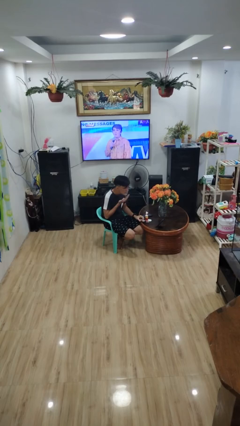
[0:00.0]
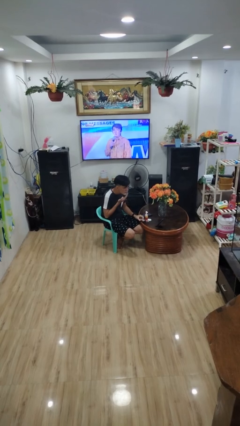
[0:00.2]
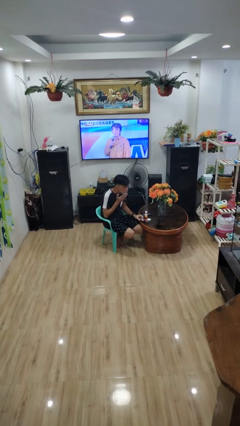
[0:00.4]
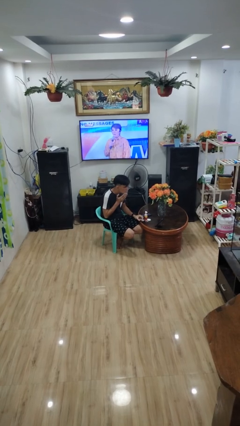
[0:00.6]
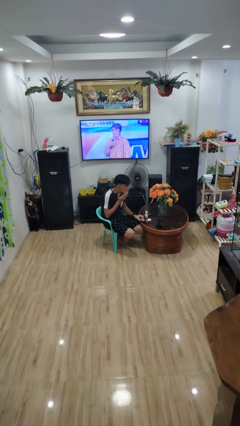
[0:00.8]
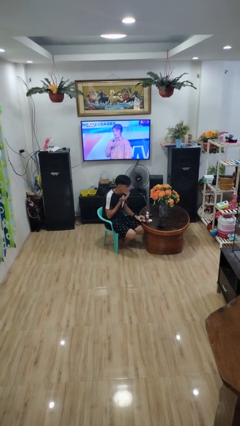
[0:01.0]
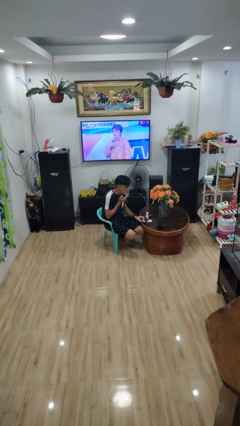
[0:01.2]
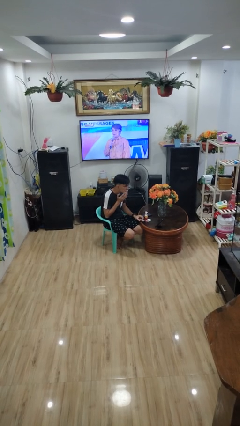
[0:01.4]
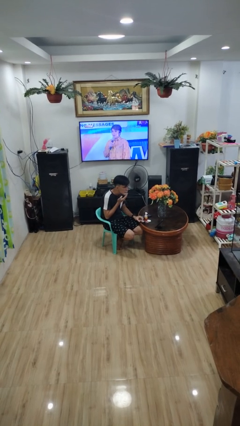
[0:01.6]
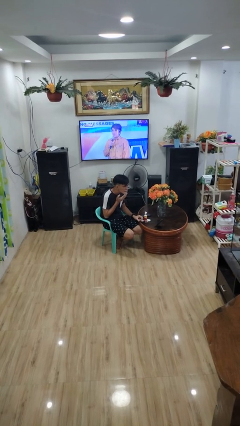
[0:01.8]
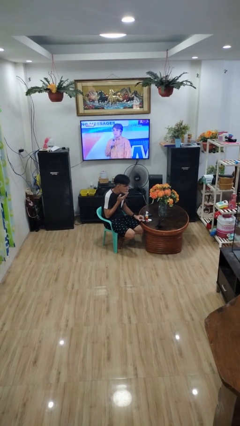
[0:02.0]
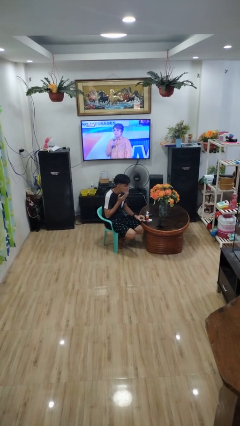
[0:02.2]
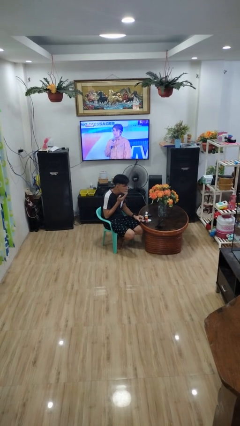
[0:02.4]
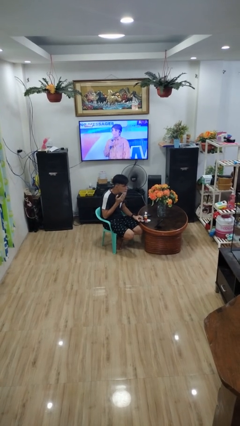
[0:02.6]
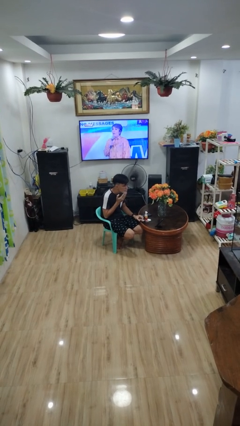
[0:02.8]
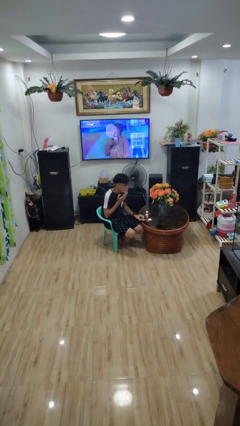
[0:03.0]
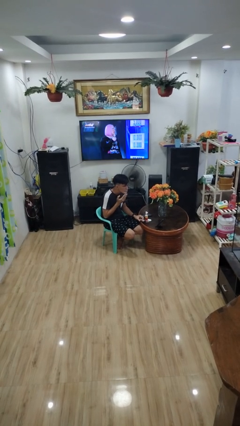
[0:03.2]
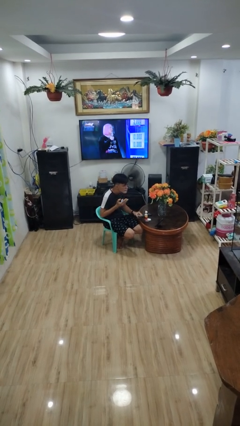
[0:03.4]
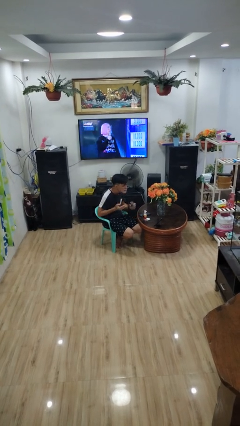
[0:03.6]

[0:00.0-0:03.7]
person applies shaving cream

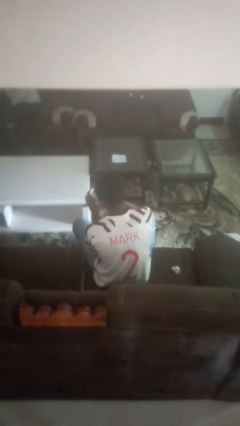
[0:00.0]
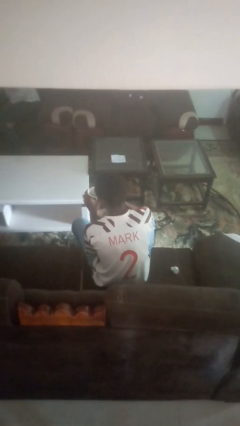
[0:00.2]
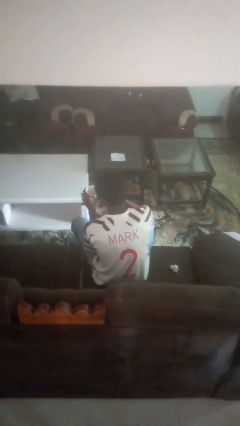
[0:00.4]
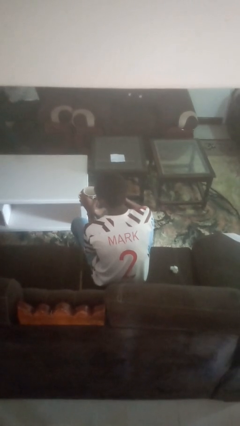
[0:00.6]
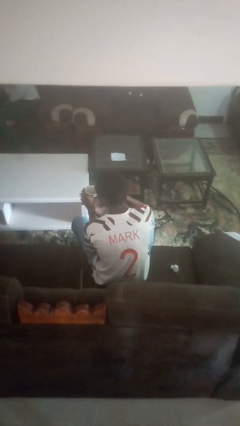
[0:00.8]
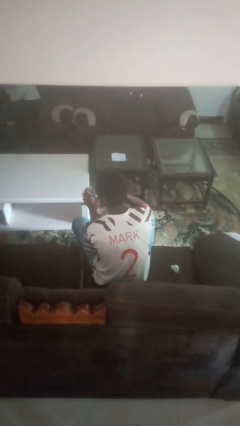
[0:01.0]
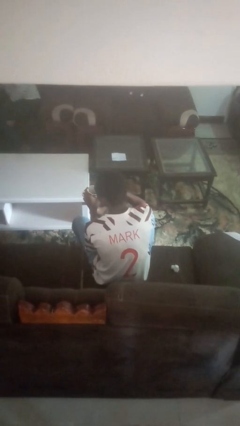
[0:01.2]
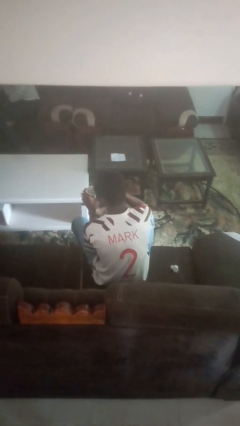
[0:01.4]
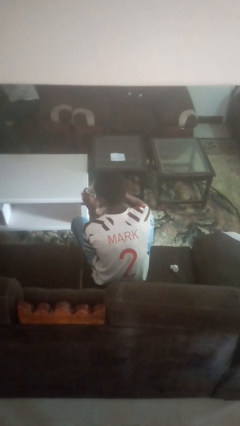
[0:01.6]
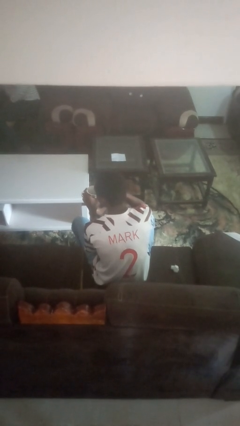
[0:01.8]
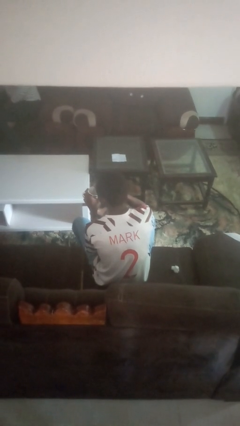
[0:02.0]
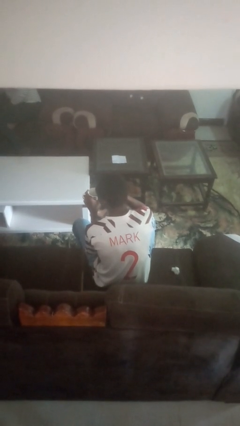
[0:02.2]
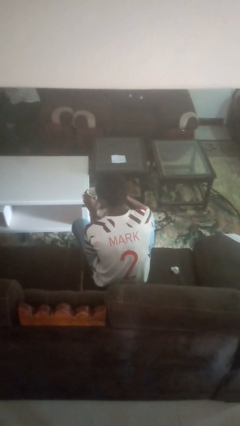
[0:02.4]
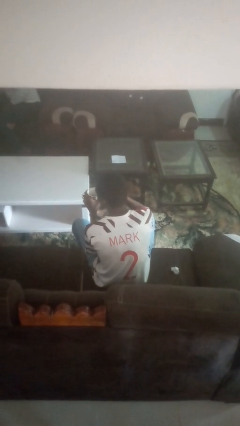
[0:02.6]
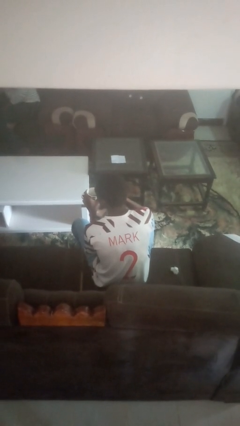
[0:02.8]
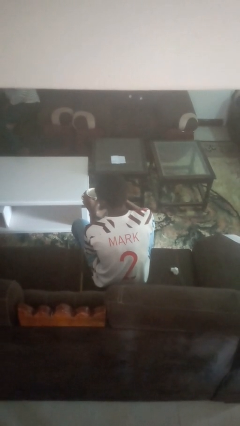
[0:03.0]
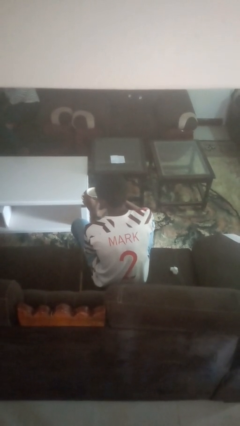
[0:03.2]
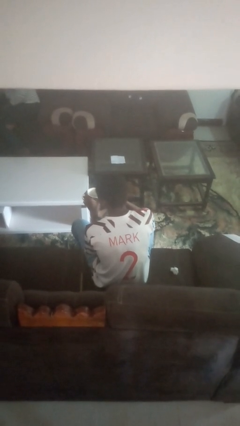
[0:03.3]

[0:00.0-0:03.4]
person stirs mug

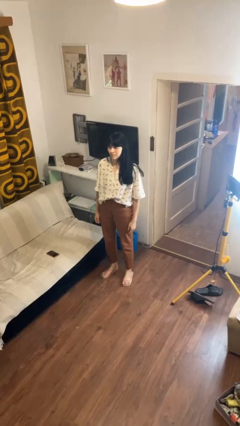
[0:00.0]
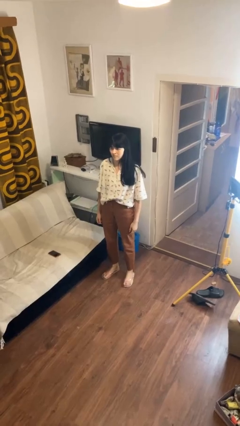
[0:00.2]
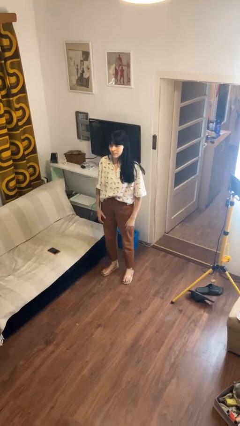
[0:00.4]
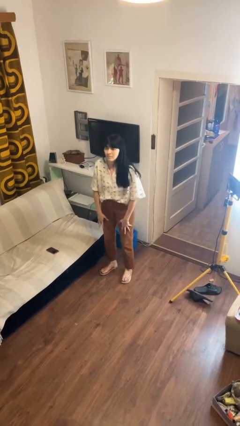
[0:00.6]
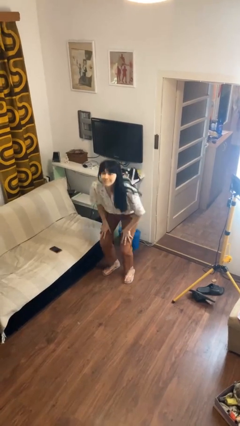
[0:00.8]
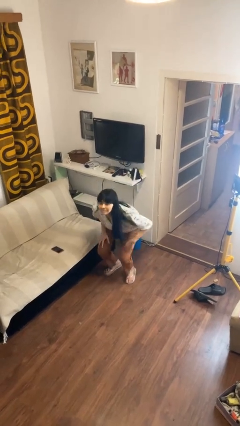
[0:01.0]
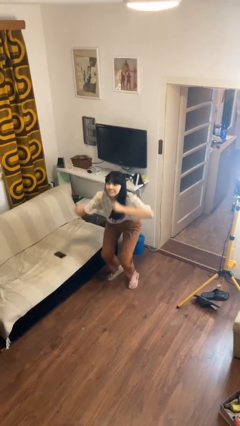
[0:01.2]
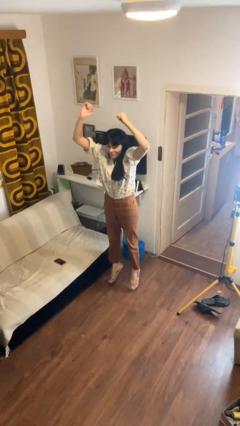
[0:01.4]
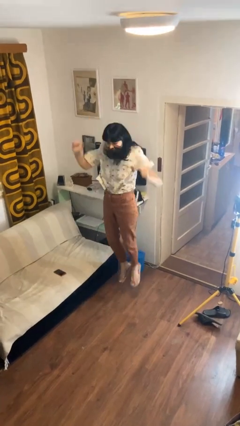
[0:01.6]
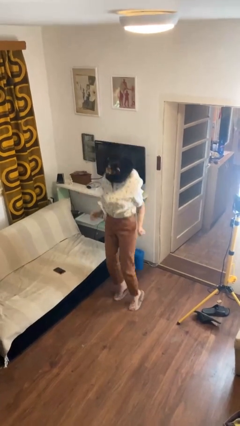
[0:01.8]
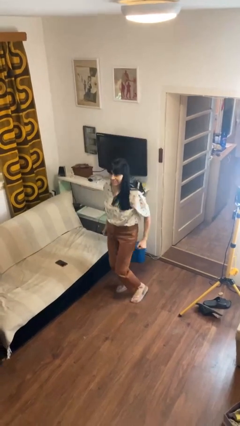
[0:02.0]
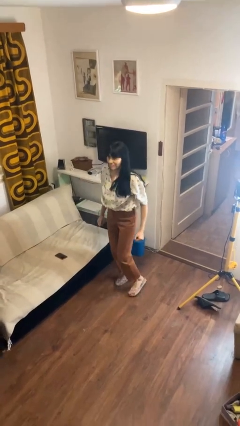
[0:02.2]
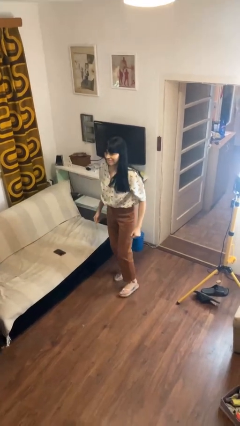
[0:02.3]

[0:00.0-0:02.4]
person jumps

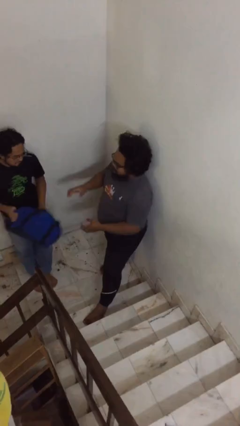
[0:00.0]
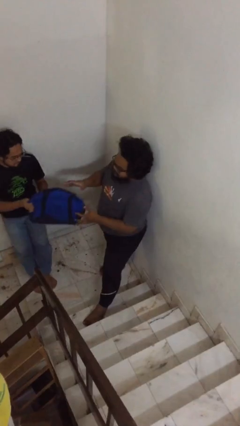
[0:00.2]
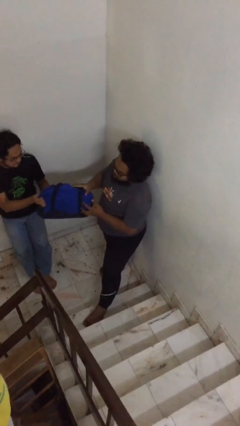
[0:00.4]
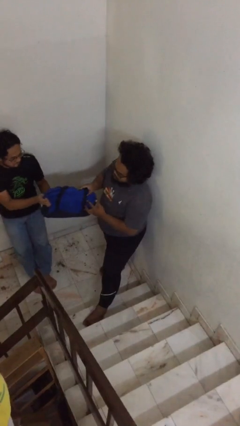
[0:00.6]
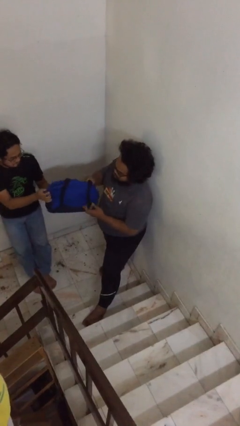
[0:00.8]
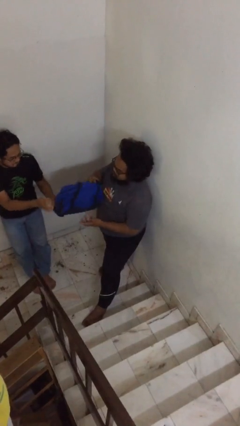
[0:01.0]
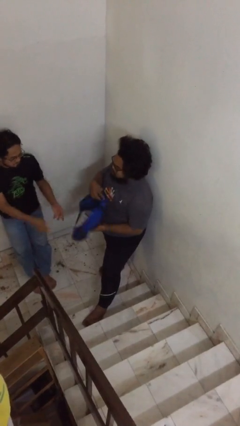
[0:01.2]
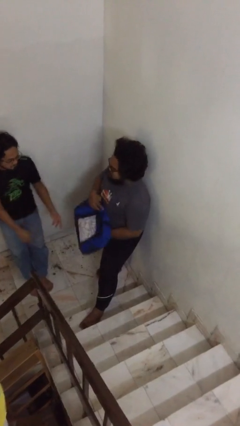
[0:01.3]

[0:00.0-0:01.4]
person transfers object to person

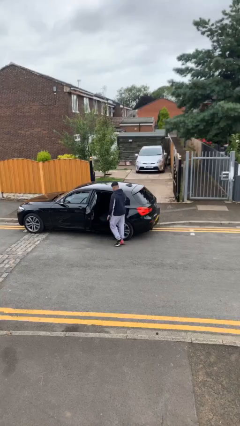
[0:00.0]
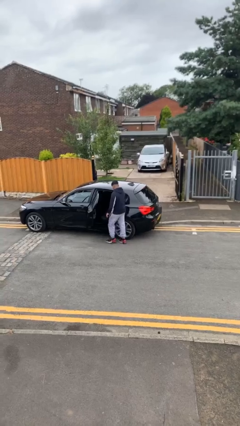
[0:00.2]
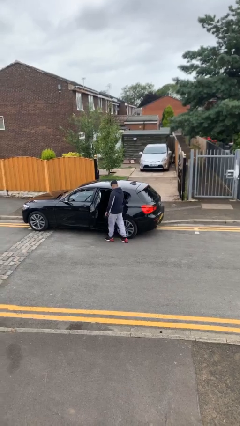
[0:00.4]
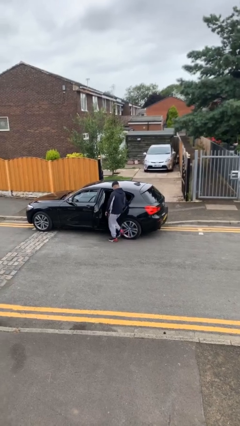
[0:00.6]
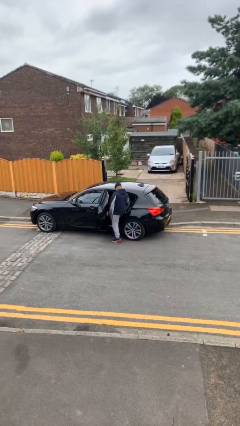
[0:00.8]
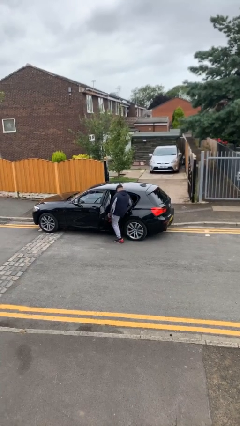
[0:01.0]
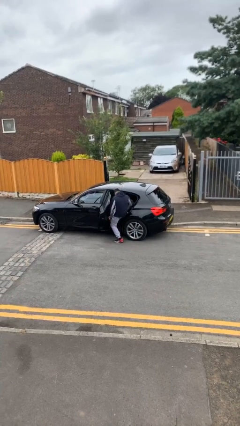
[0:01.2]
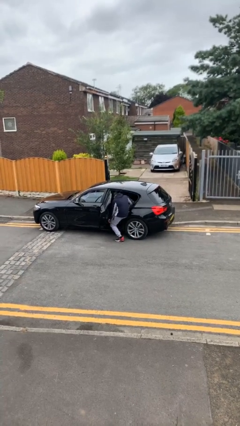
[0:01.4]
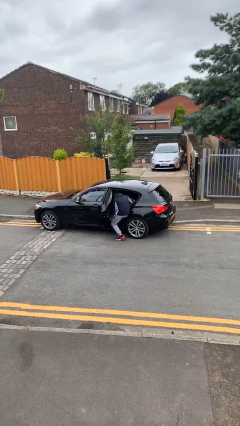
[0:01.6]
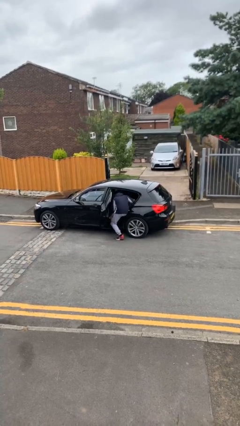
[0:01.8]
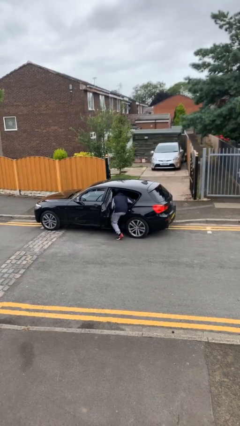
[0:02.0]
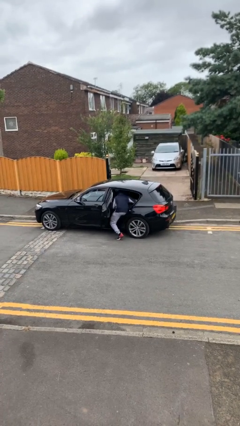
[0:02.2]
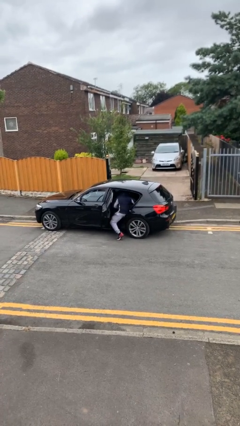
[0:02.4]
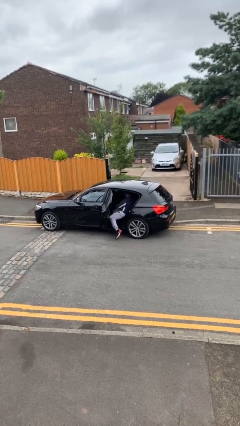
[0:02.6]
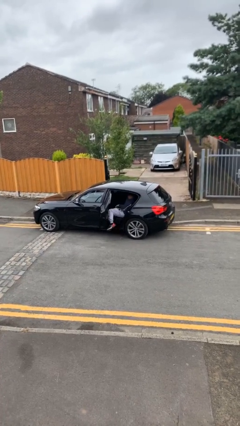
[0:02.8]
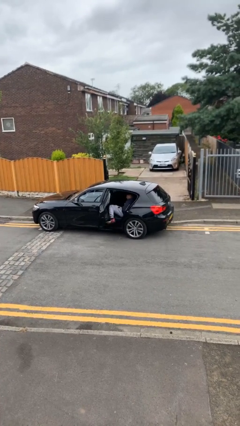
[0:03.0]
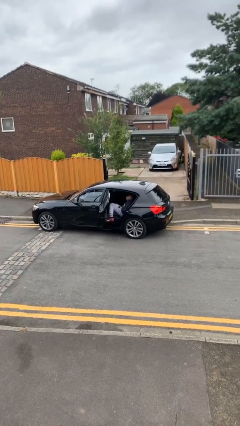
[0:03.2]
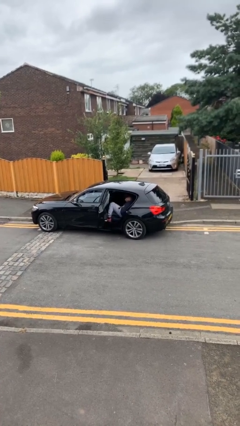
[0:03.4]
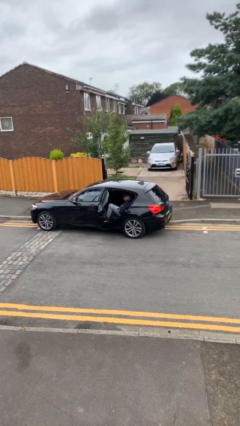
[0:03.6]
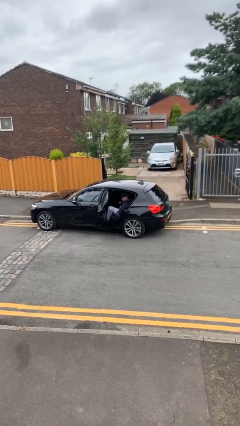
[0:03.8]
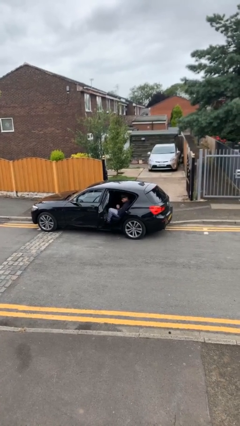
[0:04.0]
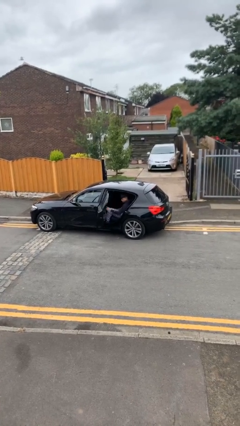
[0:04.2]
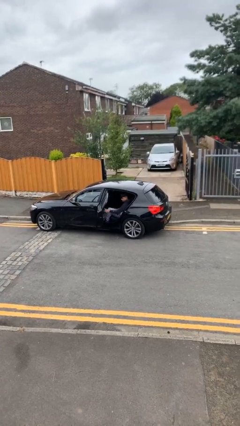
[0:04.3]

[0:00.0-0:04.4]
person enters car

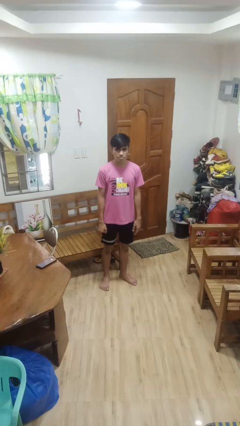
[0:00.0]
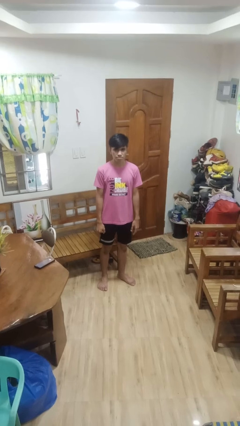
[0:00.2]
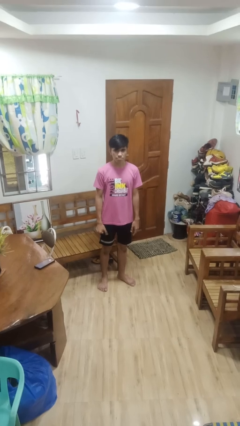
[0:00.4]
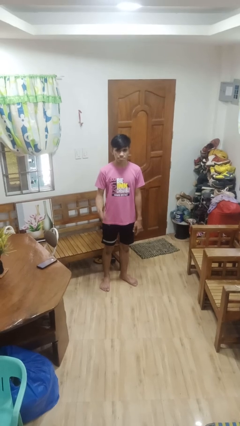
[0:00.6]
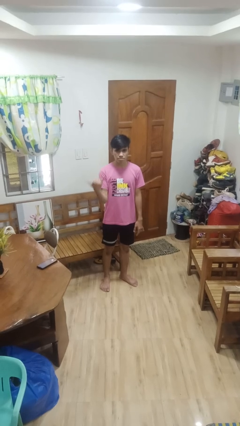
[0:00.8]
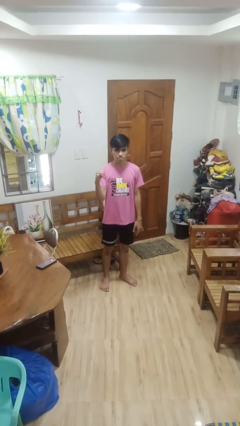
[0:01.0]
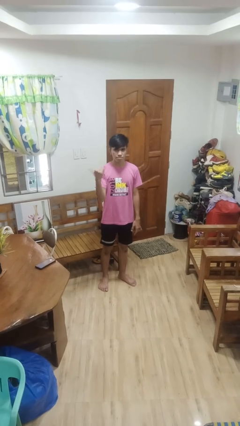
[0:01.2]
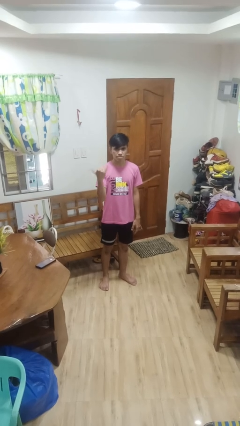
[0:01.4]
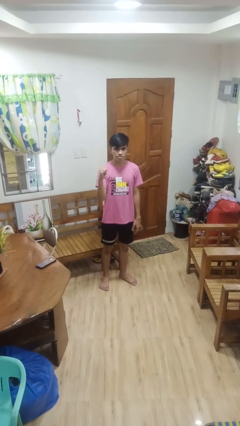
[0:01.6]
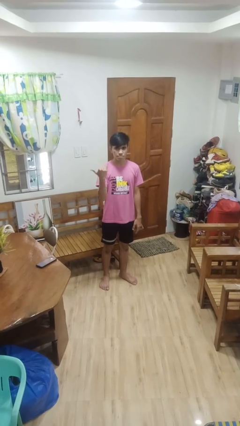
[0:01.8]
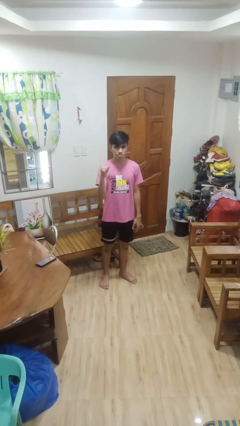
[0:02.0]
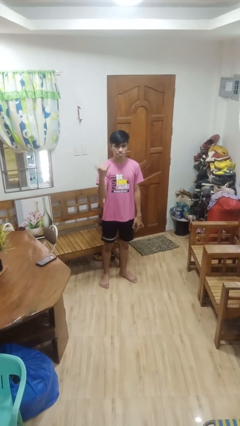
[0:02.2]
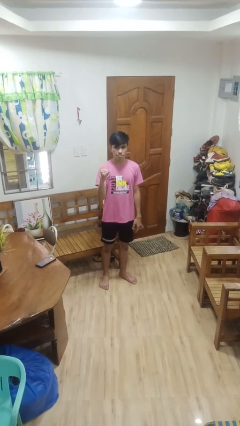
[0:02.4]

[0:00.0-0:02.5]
person gestures hang loose
